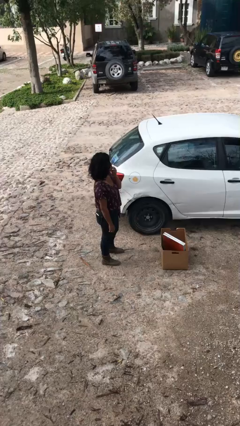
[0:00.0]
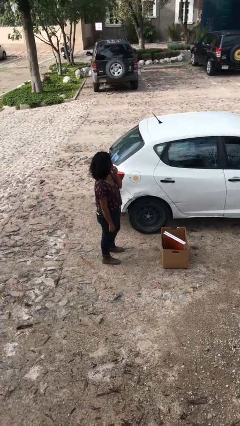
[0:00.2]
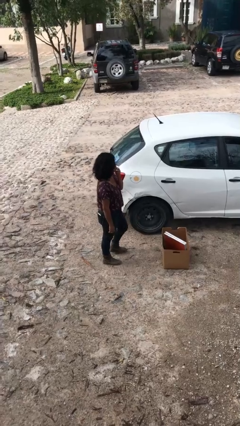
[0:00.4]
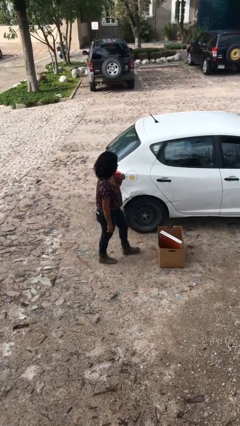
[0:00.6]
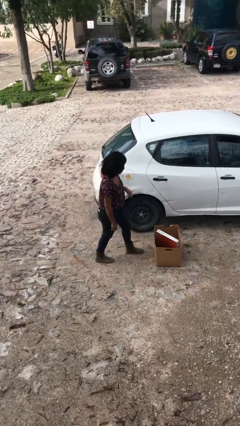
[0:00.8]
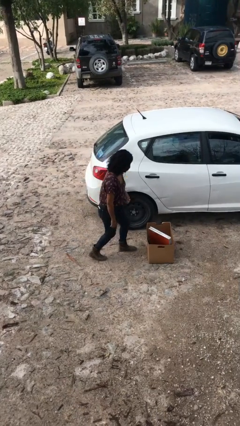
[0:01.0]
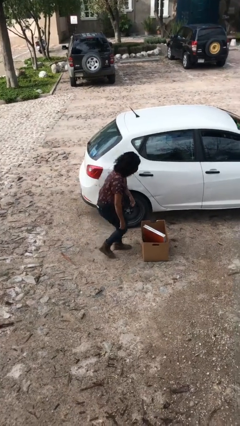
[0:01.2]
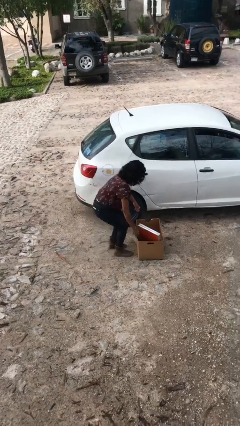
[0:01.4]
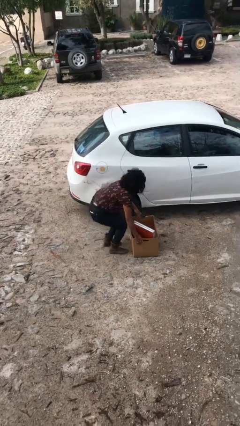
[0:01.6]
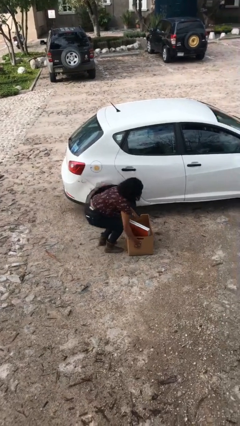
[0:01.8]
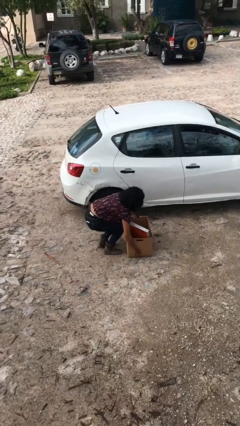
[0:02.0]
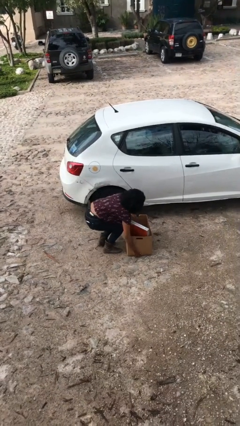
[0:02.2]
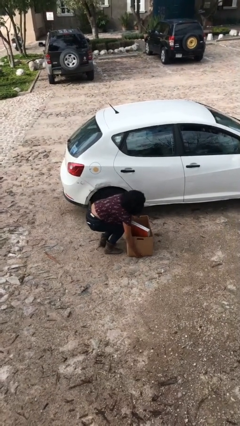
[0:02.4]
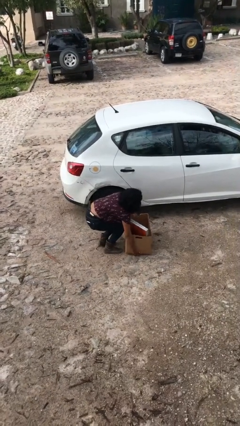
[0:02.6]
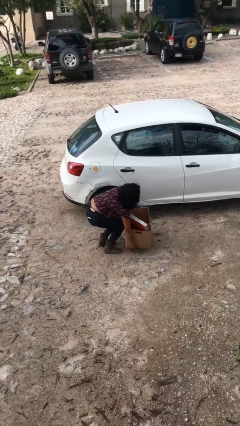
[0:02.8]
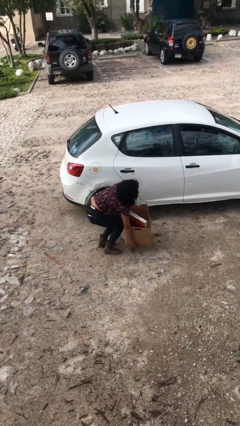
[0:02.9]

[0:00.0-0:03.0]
person picks up object from floor

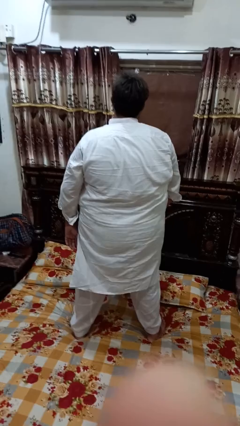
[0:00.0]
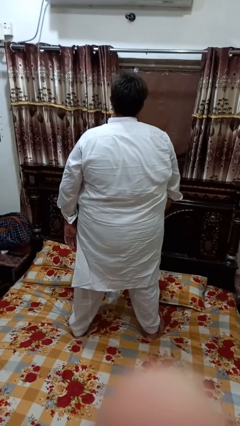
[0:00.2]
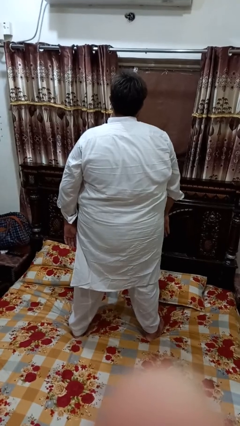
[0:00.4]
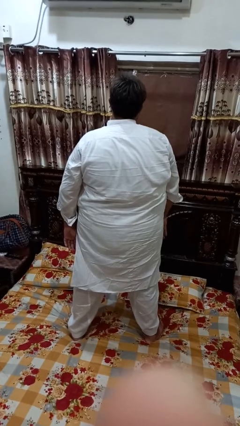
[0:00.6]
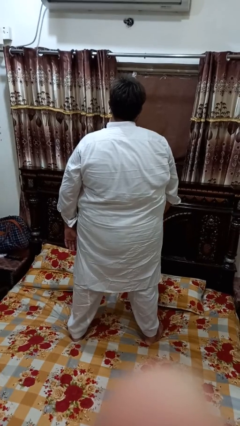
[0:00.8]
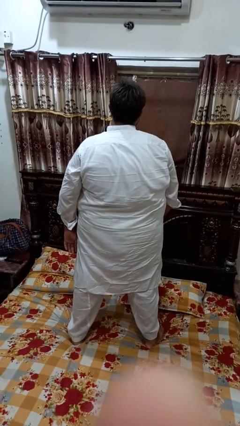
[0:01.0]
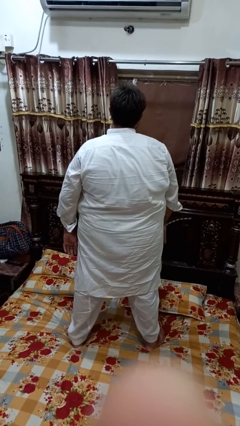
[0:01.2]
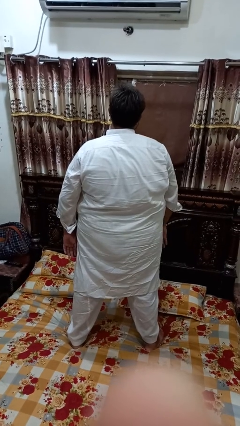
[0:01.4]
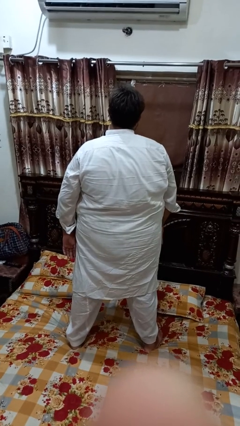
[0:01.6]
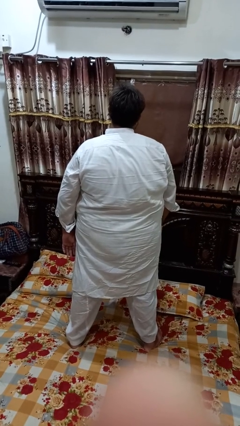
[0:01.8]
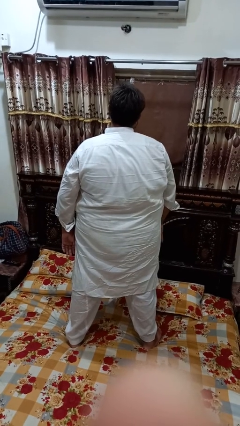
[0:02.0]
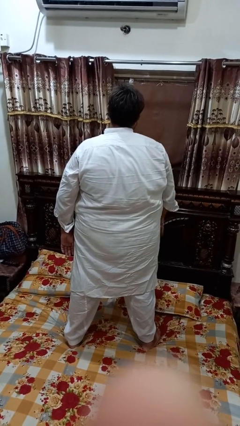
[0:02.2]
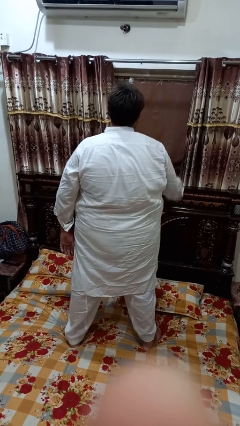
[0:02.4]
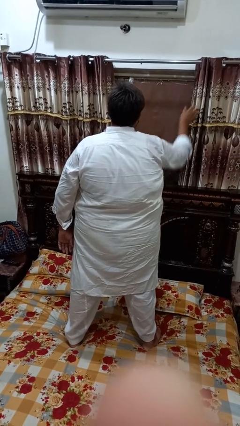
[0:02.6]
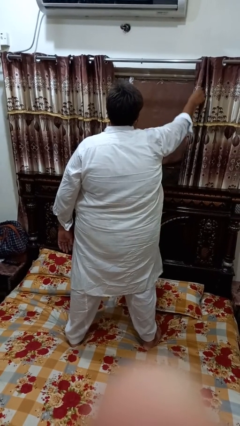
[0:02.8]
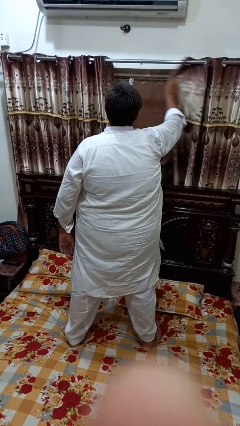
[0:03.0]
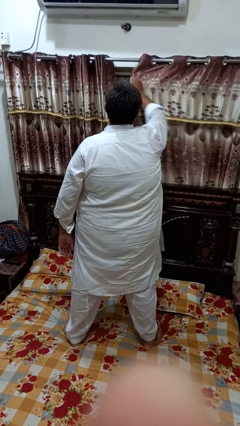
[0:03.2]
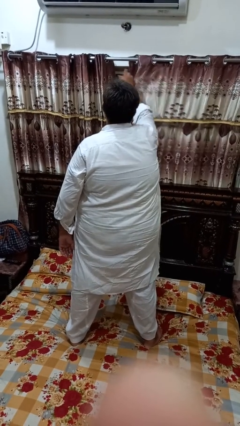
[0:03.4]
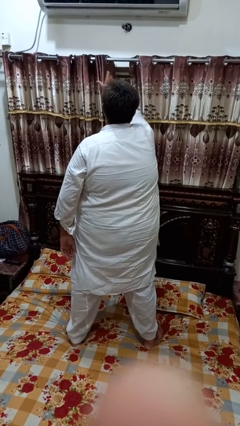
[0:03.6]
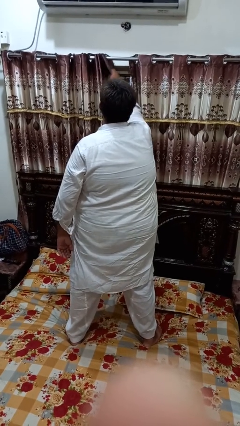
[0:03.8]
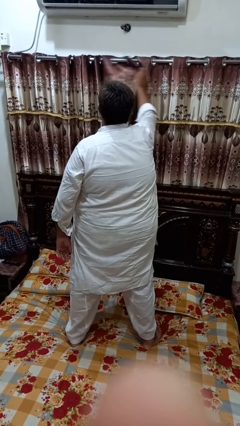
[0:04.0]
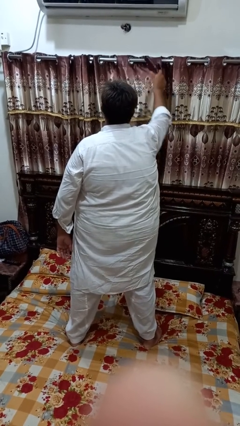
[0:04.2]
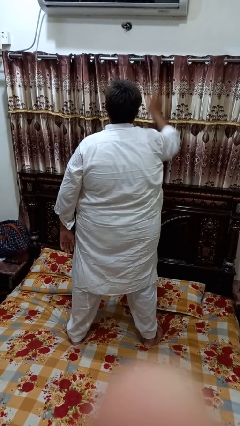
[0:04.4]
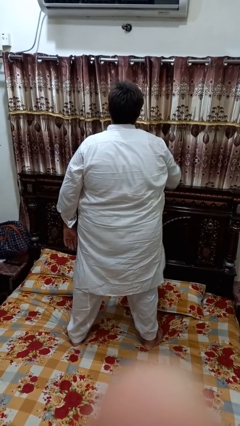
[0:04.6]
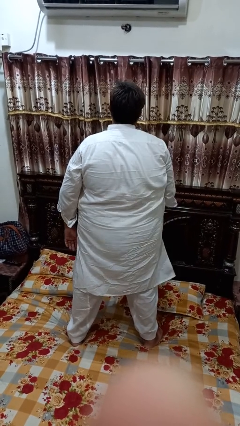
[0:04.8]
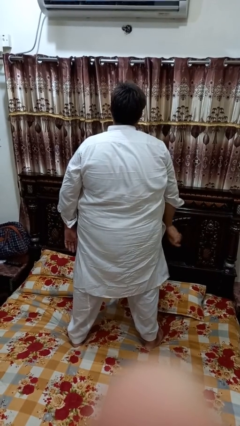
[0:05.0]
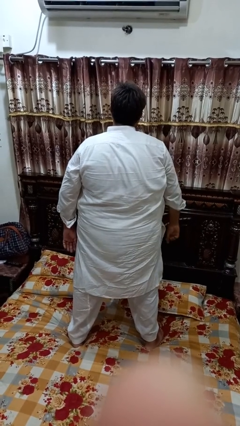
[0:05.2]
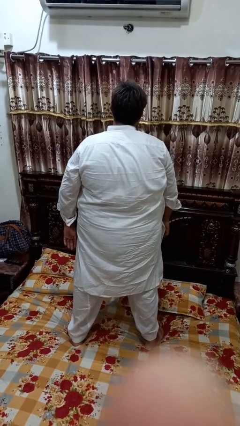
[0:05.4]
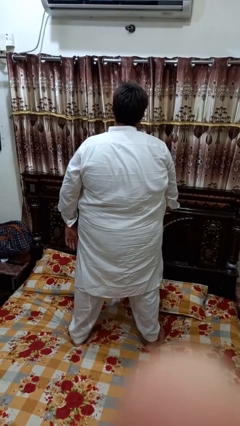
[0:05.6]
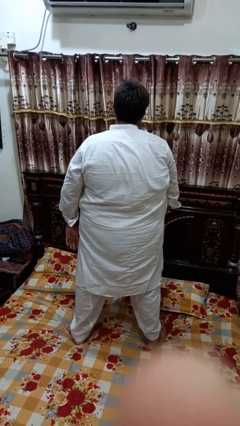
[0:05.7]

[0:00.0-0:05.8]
person closes curtains

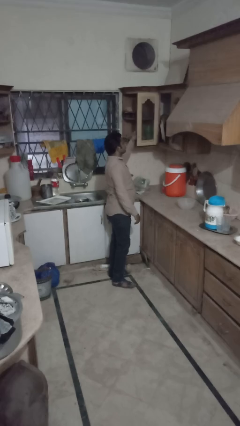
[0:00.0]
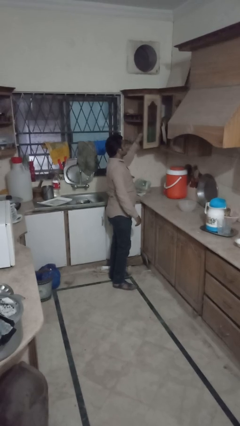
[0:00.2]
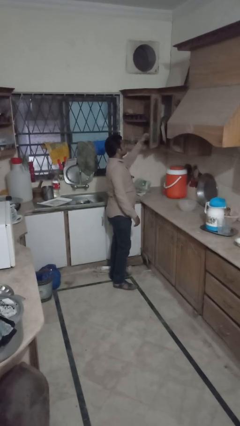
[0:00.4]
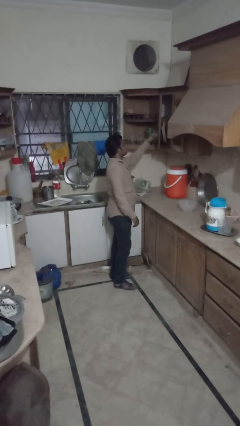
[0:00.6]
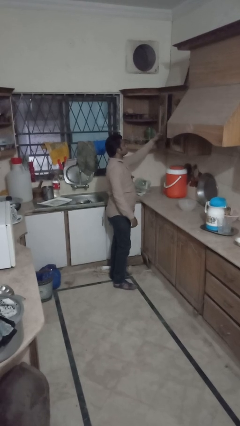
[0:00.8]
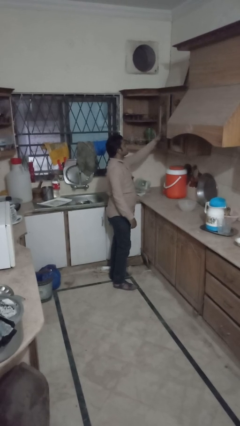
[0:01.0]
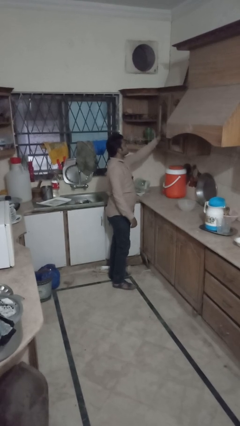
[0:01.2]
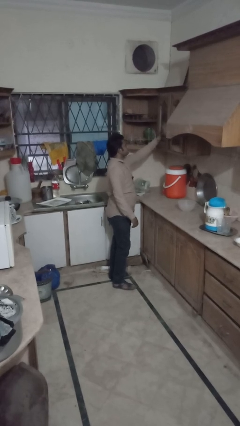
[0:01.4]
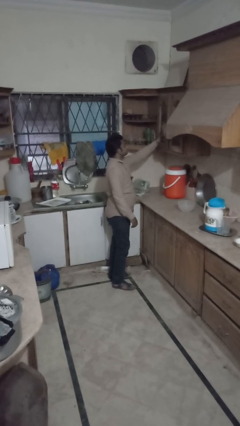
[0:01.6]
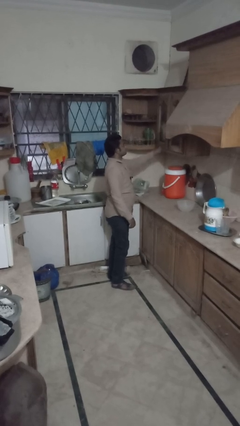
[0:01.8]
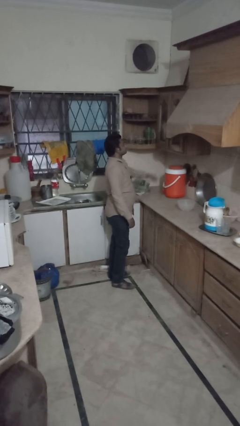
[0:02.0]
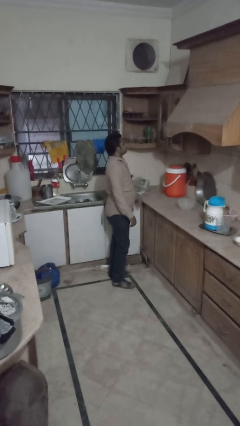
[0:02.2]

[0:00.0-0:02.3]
person closes cabinet

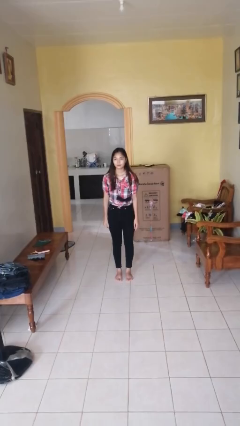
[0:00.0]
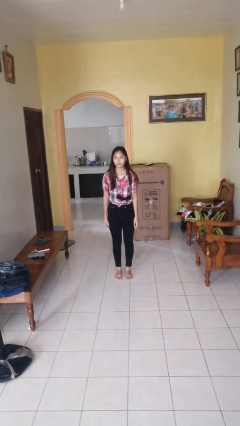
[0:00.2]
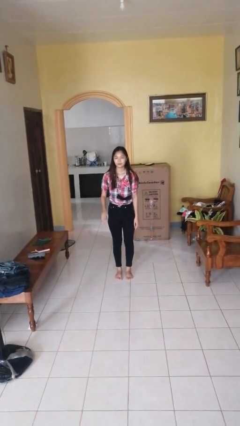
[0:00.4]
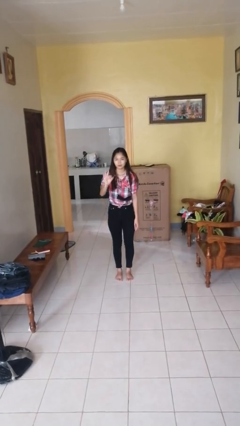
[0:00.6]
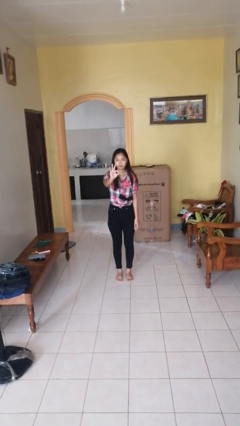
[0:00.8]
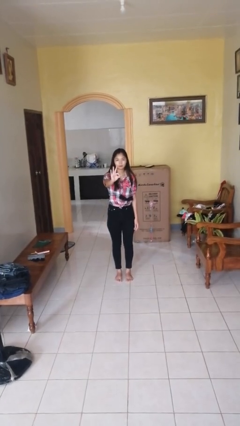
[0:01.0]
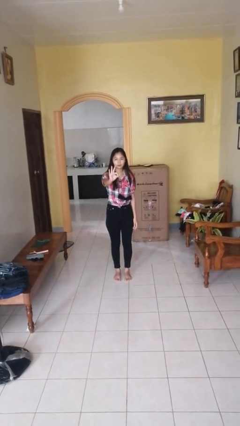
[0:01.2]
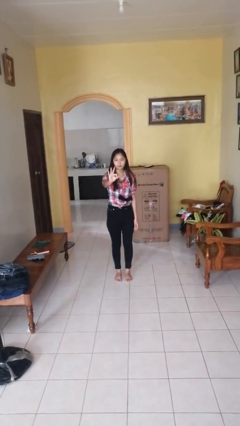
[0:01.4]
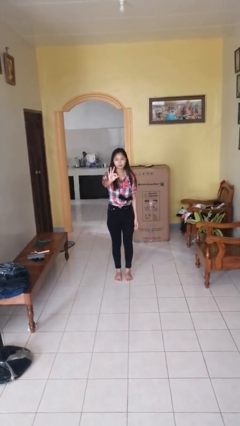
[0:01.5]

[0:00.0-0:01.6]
person gestures number three

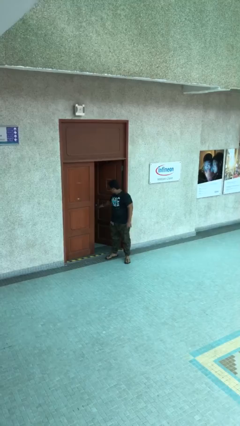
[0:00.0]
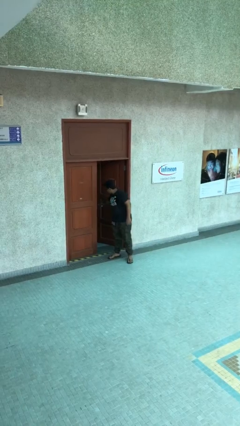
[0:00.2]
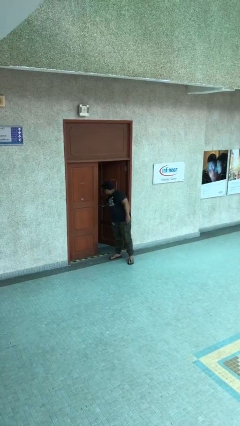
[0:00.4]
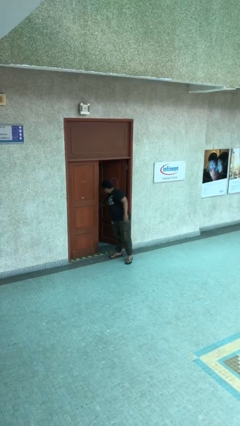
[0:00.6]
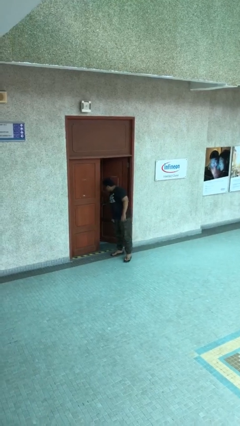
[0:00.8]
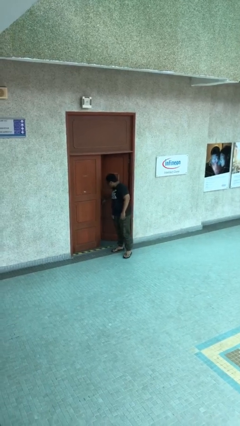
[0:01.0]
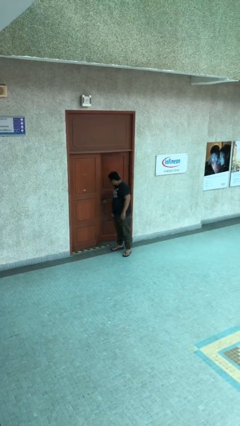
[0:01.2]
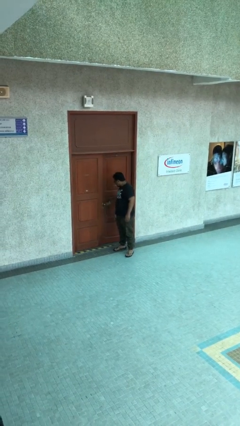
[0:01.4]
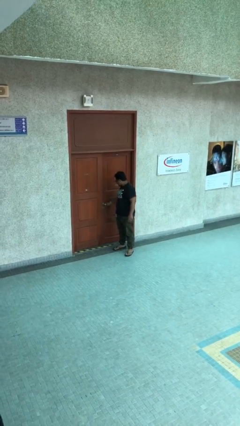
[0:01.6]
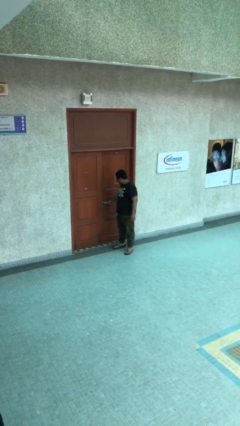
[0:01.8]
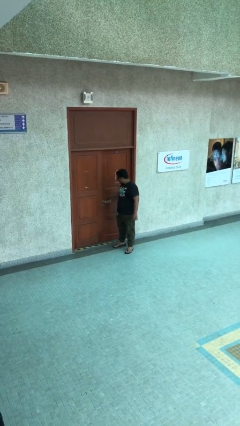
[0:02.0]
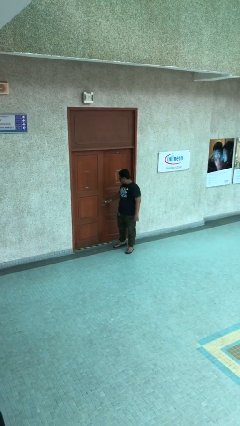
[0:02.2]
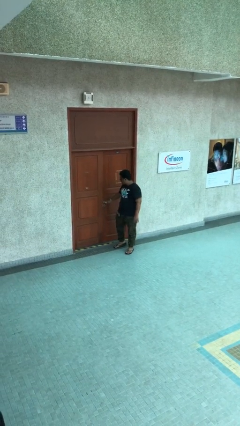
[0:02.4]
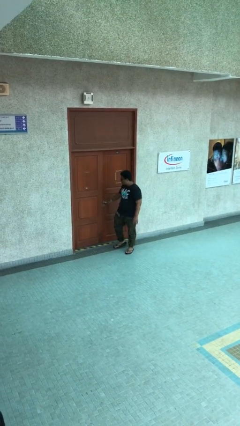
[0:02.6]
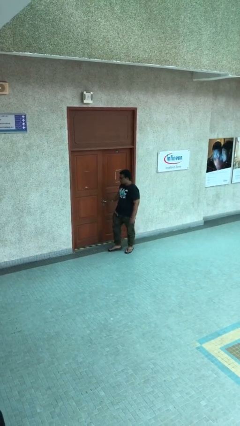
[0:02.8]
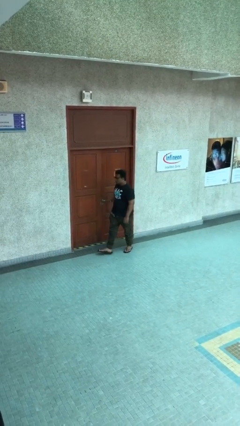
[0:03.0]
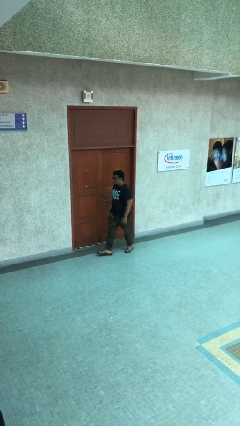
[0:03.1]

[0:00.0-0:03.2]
person closes facility door

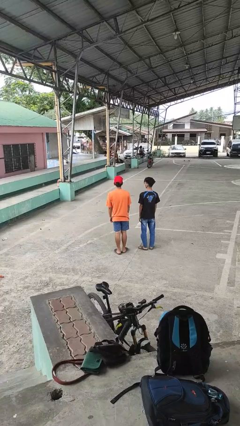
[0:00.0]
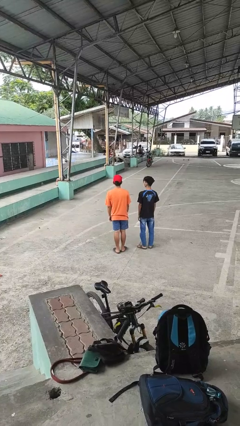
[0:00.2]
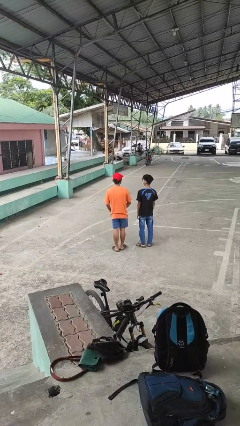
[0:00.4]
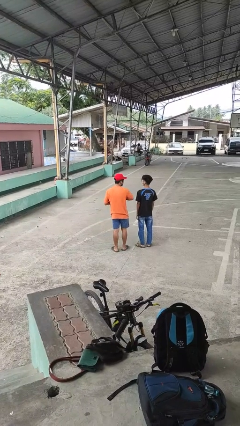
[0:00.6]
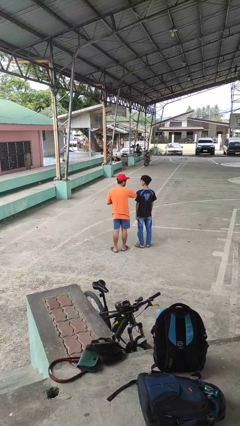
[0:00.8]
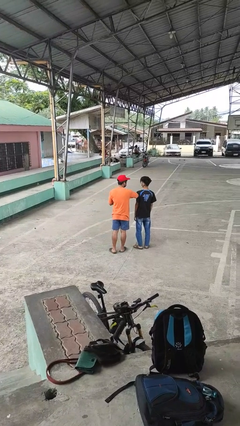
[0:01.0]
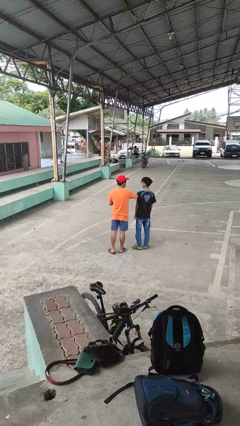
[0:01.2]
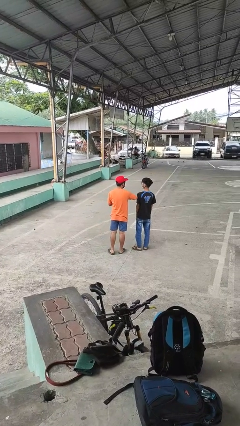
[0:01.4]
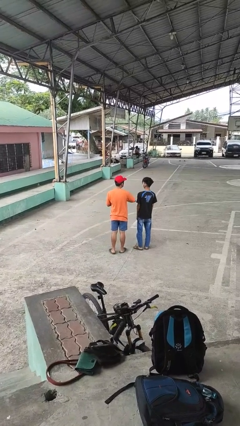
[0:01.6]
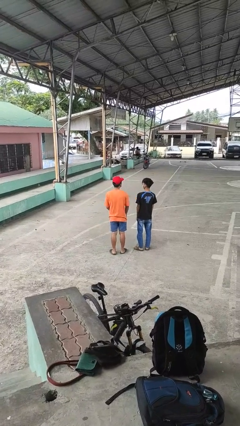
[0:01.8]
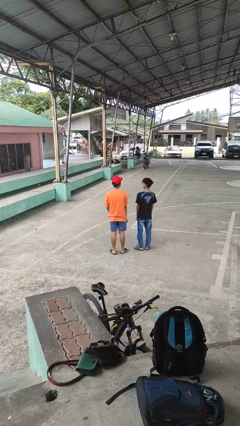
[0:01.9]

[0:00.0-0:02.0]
person nudges person with elbow
